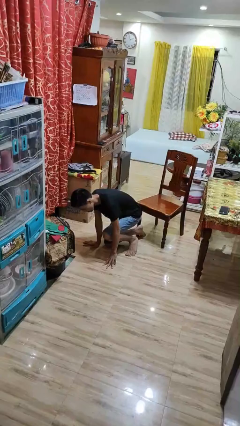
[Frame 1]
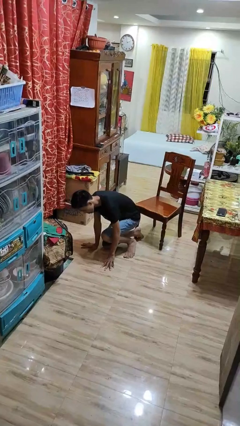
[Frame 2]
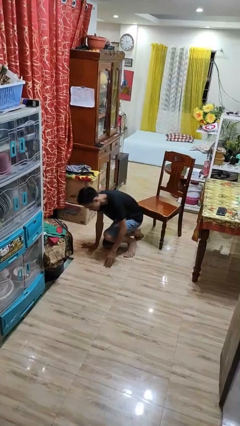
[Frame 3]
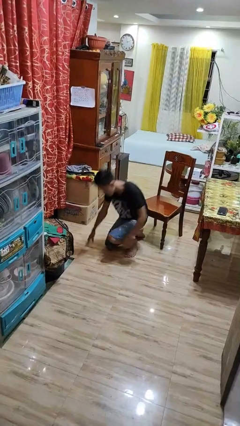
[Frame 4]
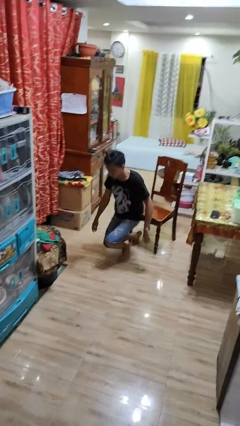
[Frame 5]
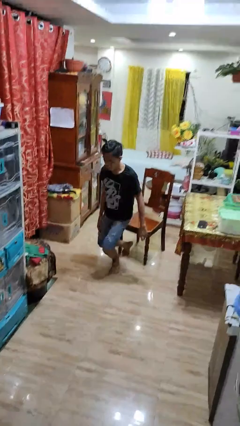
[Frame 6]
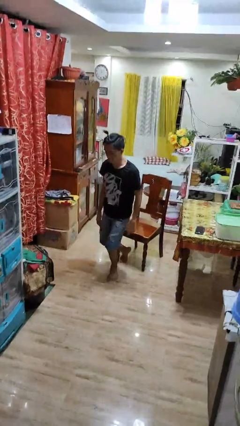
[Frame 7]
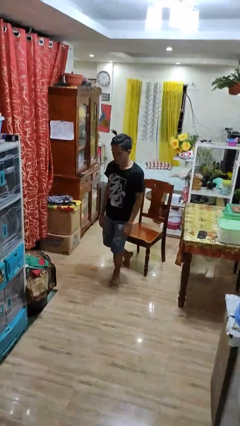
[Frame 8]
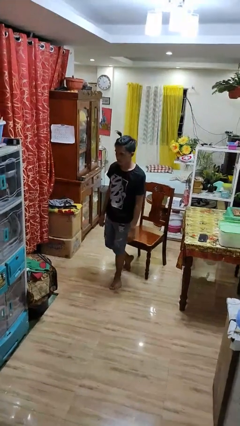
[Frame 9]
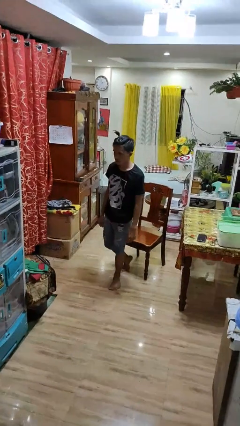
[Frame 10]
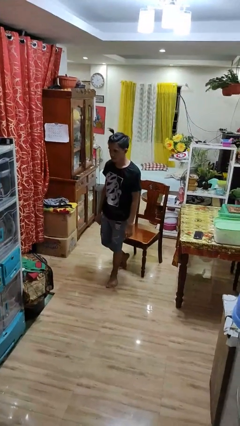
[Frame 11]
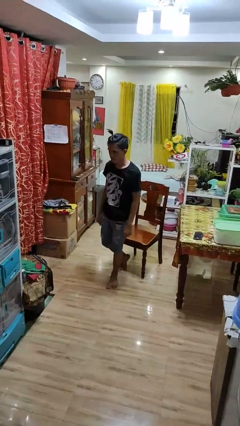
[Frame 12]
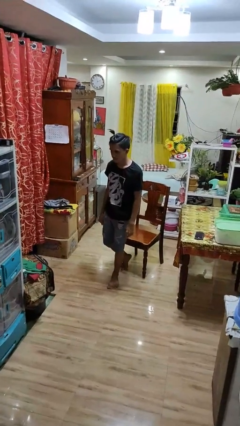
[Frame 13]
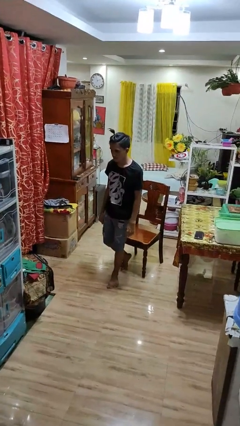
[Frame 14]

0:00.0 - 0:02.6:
person stands up from floor

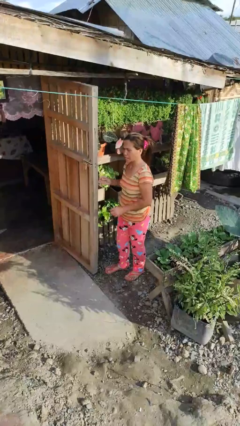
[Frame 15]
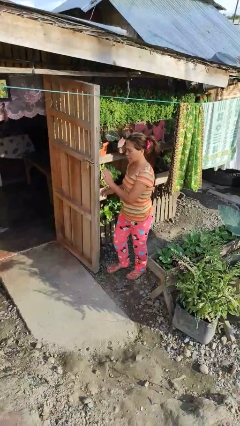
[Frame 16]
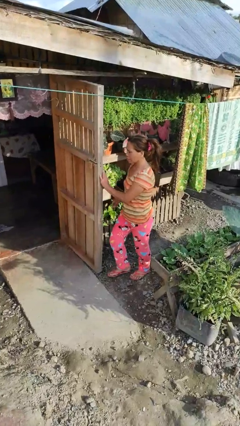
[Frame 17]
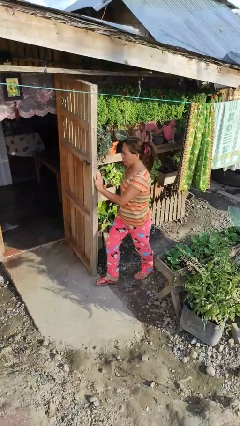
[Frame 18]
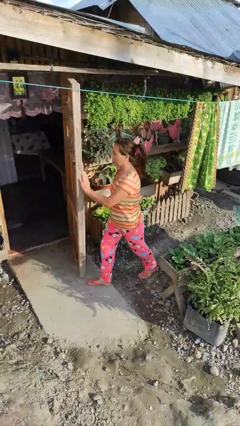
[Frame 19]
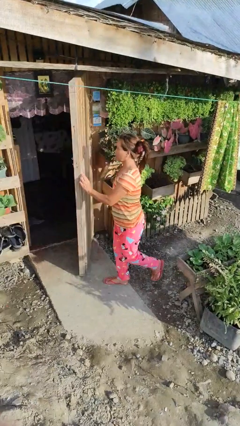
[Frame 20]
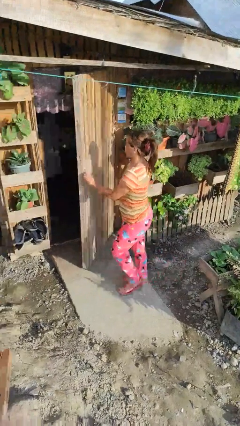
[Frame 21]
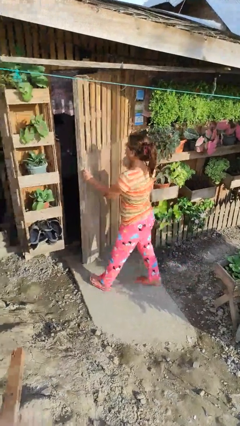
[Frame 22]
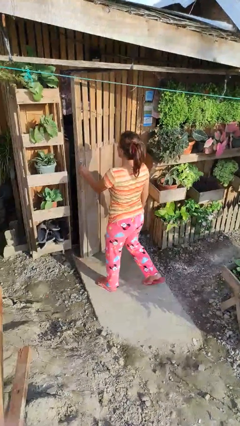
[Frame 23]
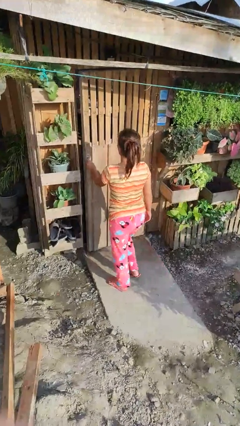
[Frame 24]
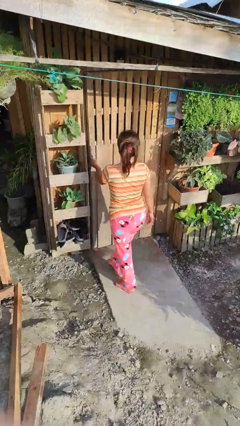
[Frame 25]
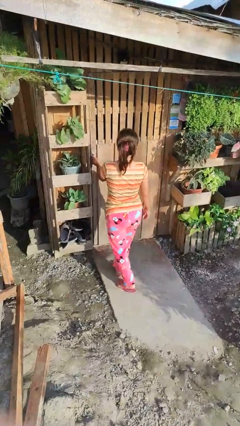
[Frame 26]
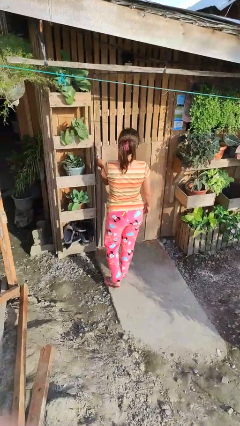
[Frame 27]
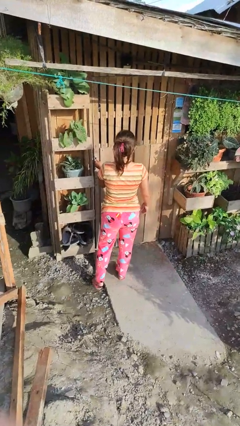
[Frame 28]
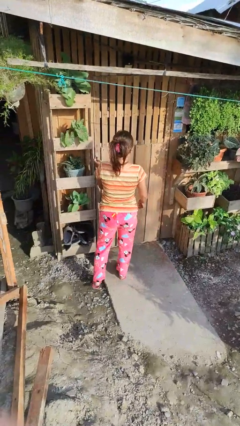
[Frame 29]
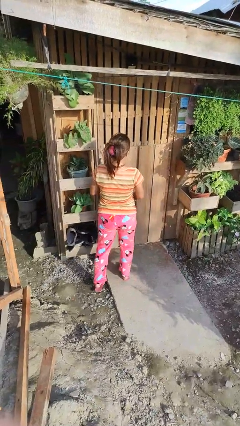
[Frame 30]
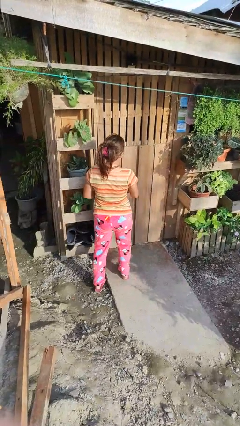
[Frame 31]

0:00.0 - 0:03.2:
person closes facility door

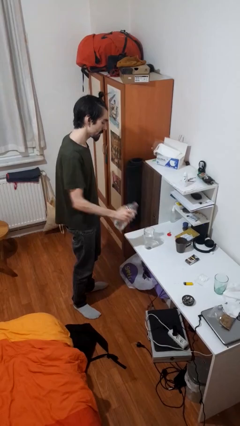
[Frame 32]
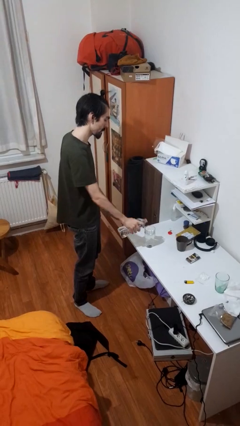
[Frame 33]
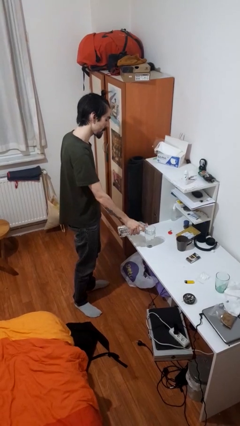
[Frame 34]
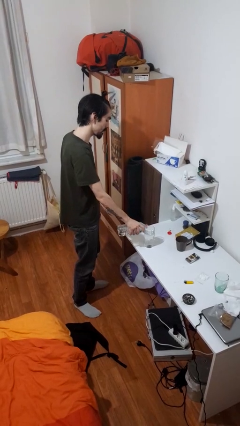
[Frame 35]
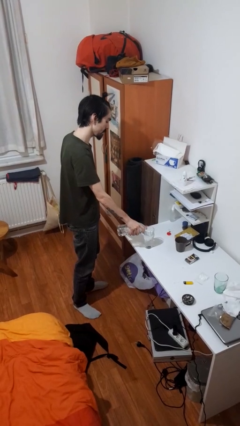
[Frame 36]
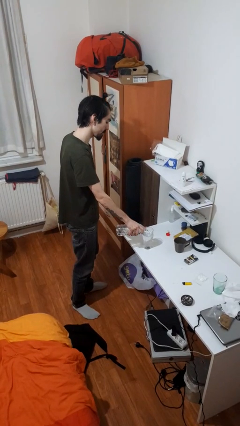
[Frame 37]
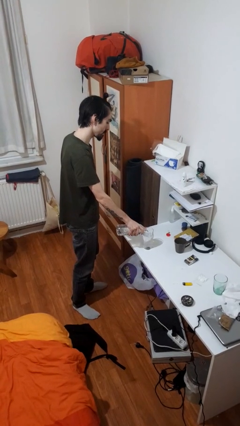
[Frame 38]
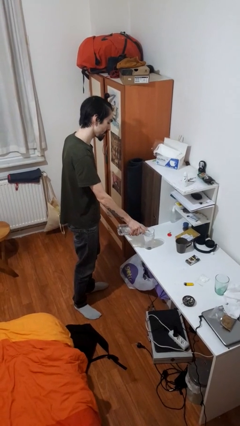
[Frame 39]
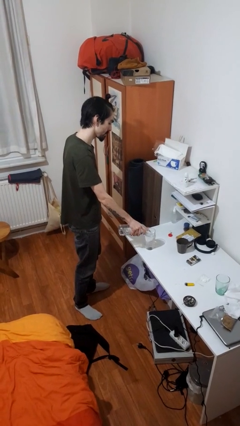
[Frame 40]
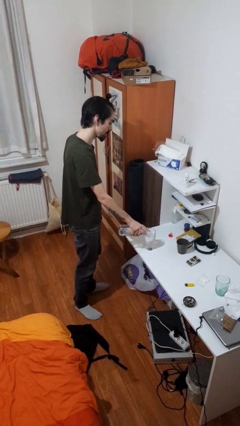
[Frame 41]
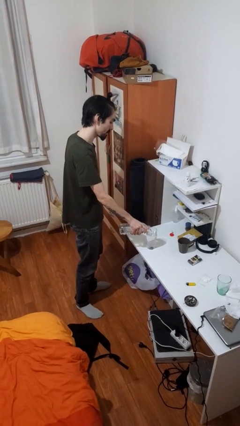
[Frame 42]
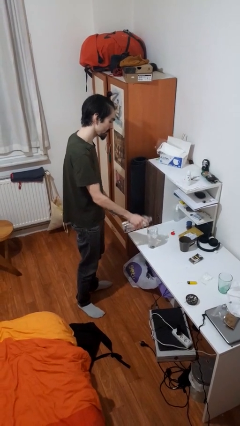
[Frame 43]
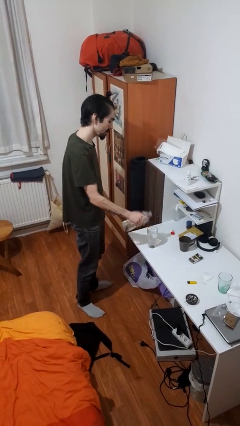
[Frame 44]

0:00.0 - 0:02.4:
person pours liquid into cup

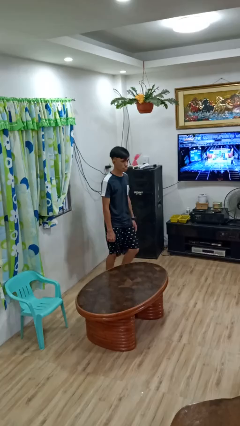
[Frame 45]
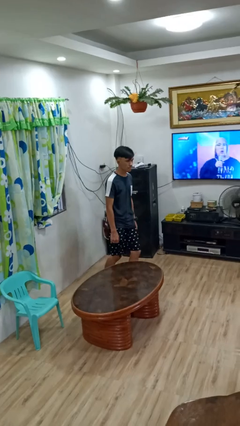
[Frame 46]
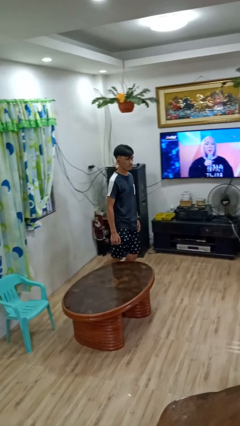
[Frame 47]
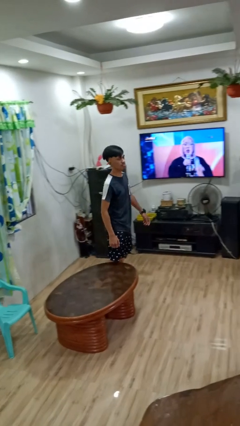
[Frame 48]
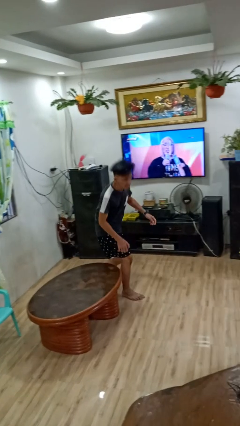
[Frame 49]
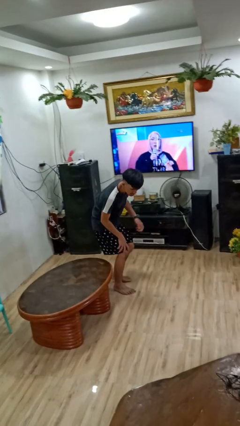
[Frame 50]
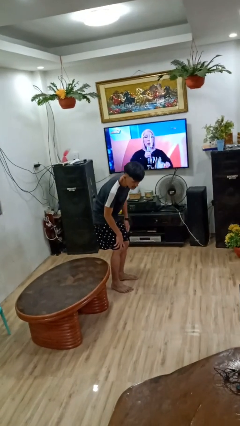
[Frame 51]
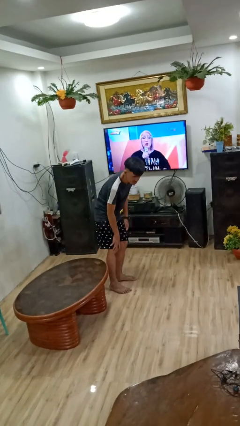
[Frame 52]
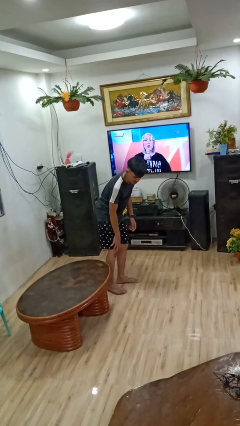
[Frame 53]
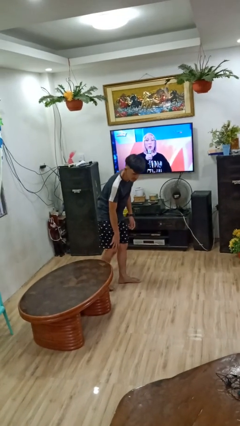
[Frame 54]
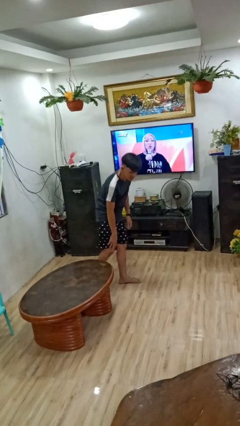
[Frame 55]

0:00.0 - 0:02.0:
person bumps into table

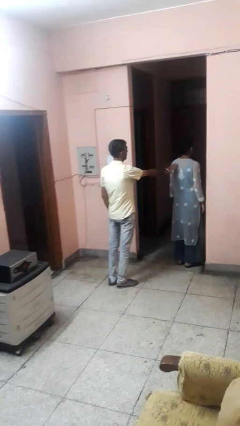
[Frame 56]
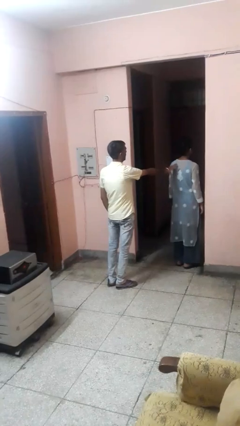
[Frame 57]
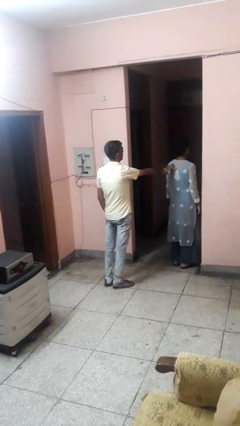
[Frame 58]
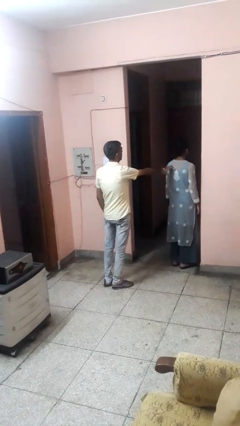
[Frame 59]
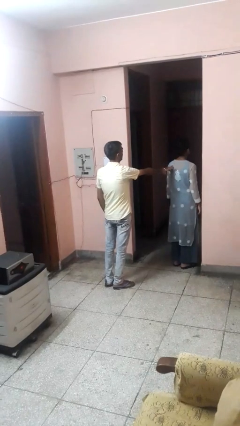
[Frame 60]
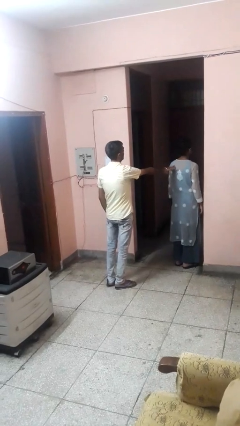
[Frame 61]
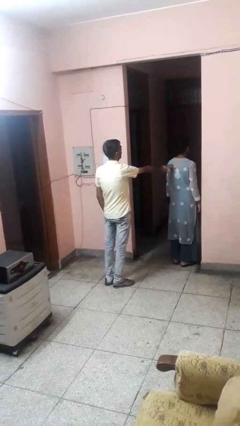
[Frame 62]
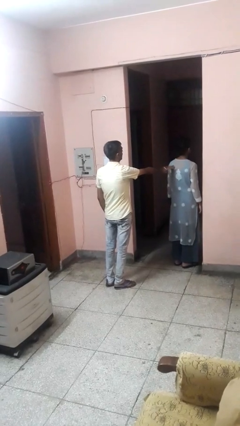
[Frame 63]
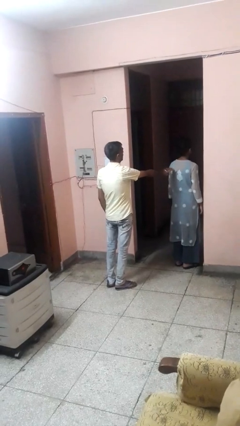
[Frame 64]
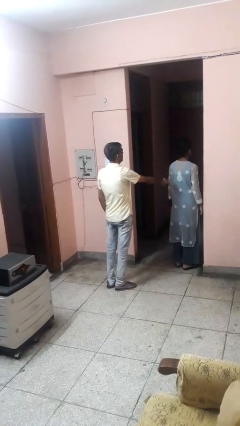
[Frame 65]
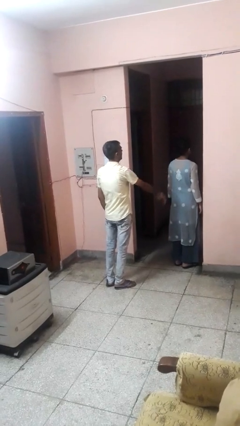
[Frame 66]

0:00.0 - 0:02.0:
person touches back of person

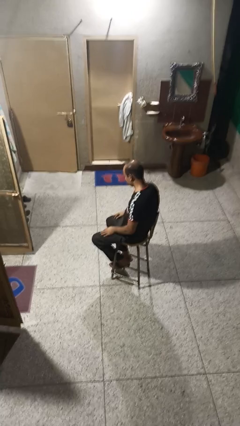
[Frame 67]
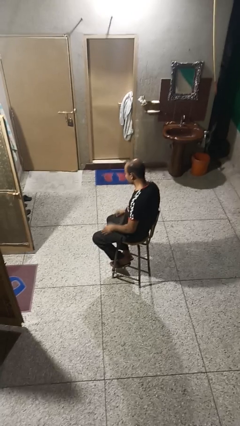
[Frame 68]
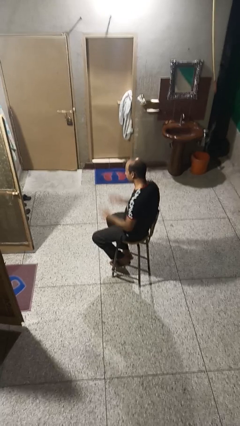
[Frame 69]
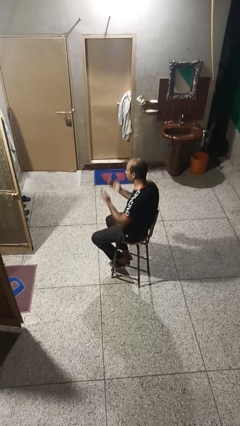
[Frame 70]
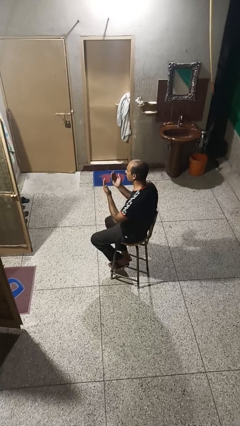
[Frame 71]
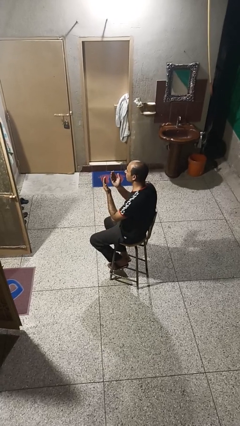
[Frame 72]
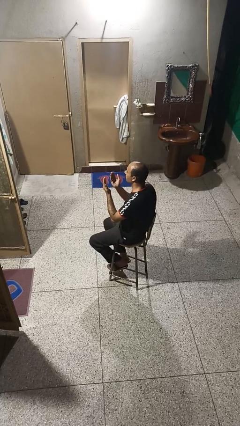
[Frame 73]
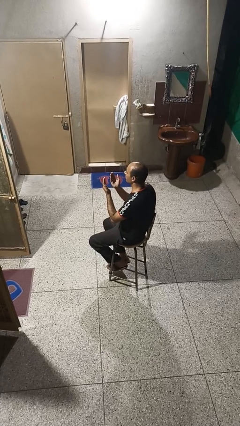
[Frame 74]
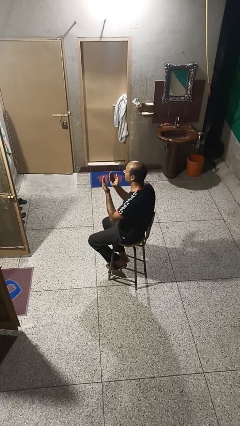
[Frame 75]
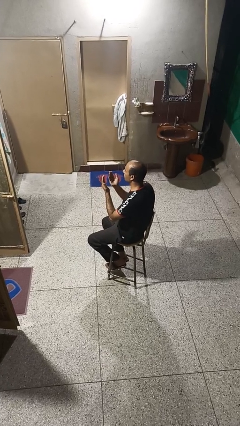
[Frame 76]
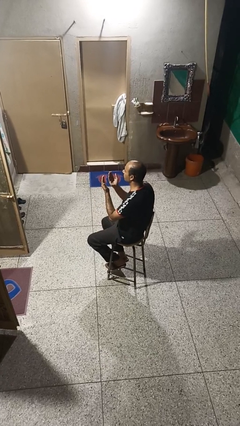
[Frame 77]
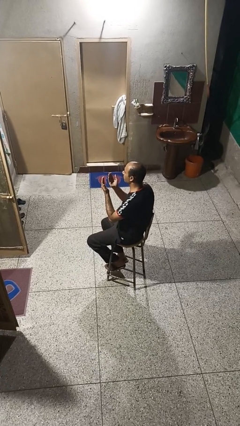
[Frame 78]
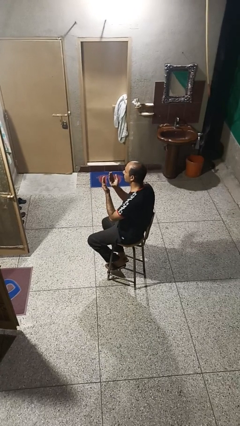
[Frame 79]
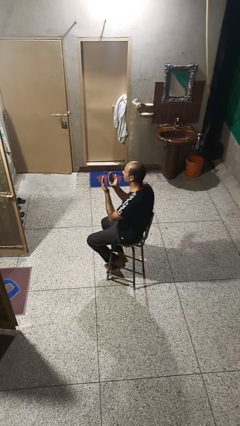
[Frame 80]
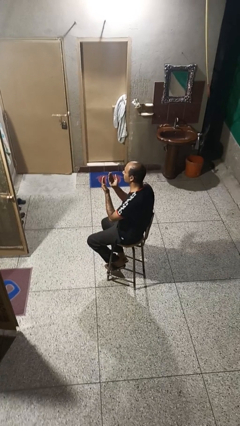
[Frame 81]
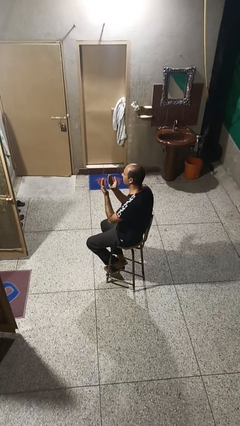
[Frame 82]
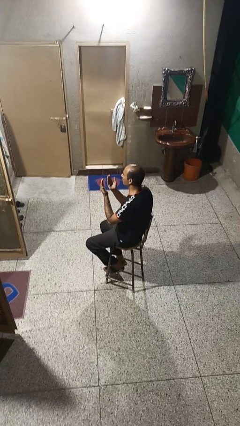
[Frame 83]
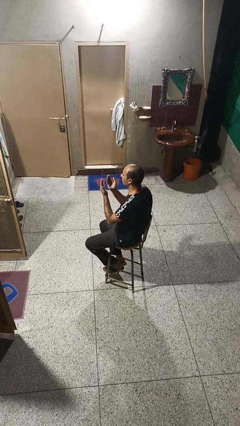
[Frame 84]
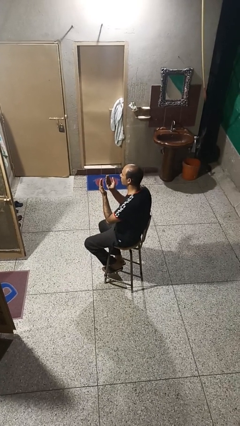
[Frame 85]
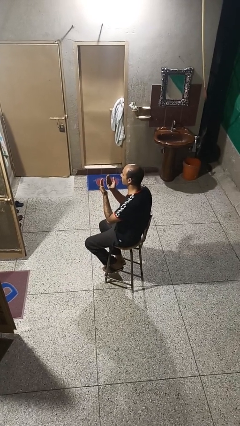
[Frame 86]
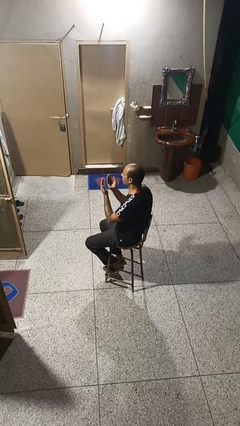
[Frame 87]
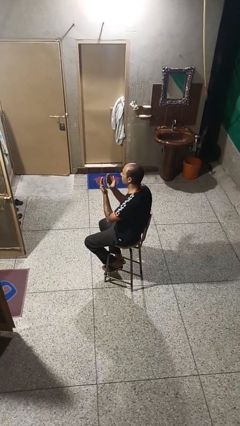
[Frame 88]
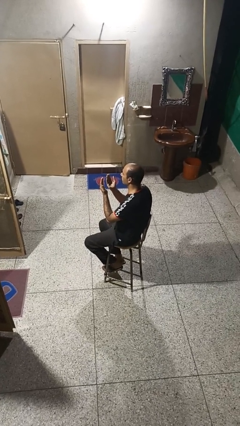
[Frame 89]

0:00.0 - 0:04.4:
person prays

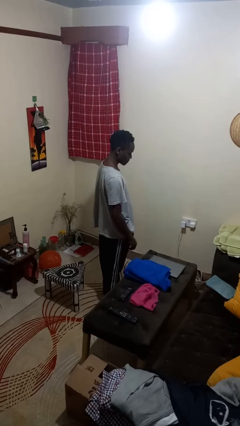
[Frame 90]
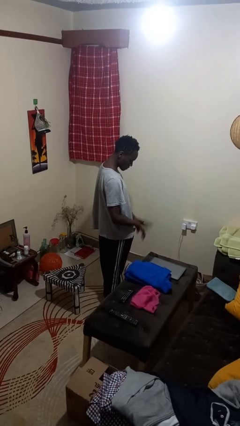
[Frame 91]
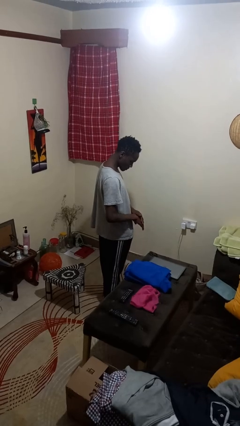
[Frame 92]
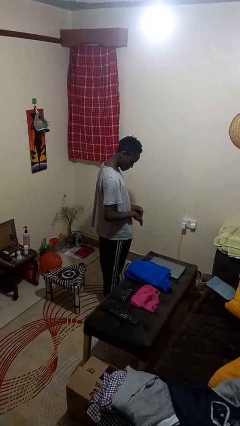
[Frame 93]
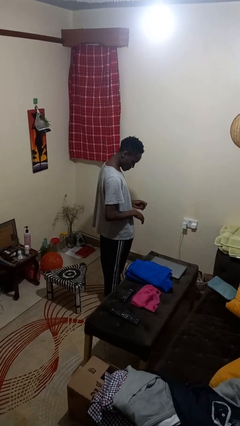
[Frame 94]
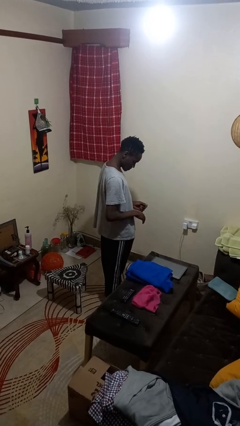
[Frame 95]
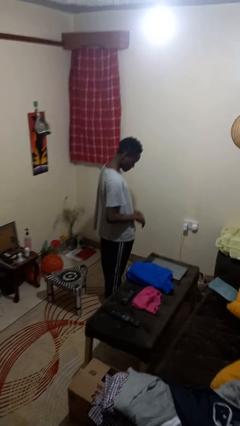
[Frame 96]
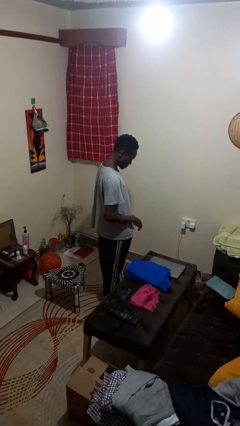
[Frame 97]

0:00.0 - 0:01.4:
person swats bug
